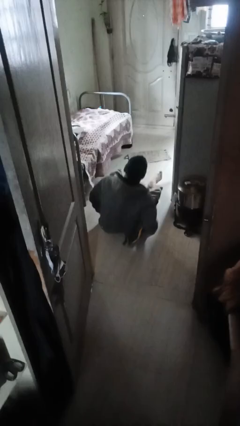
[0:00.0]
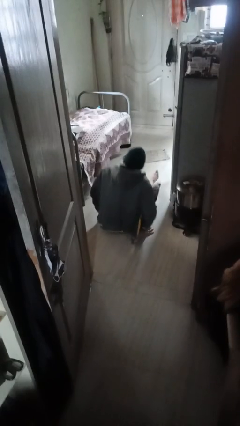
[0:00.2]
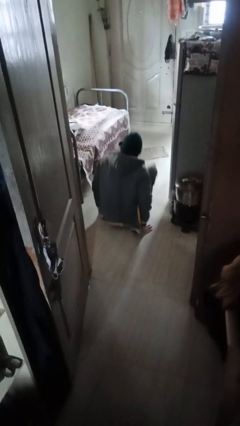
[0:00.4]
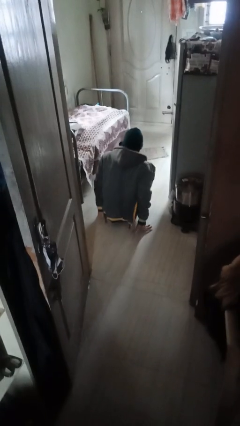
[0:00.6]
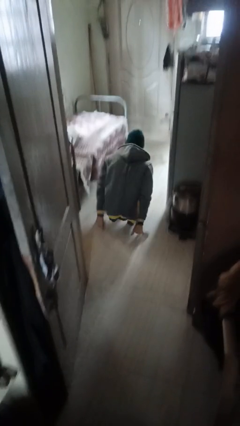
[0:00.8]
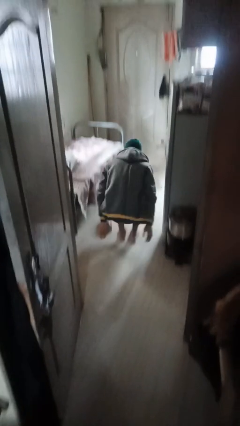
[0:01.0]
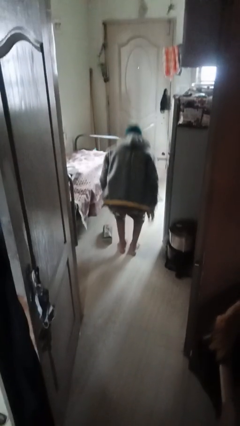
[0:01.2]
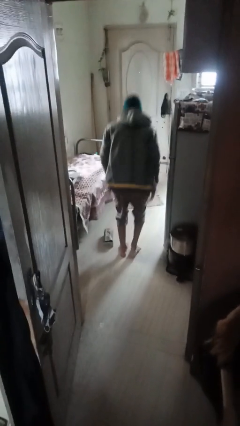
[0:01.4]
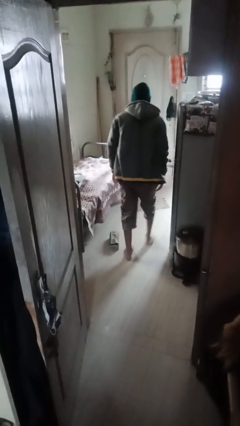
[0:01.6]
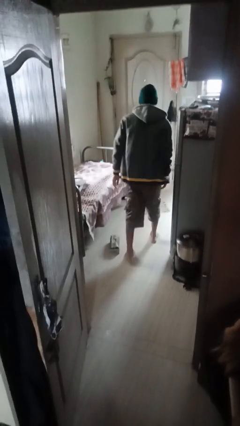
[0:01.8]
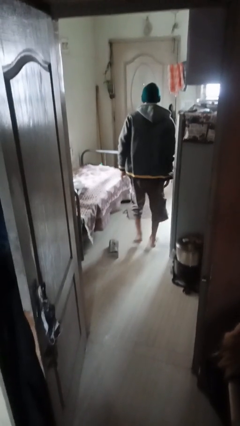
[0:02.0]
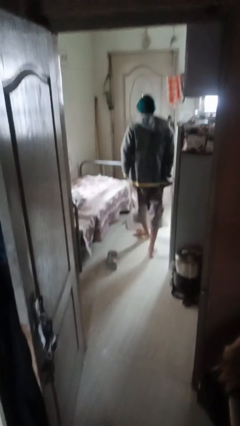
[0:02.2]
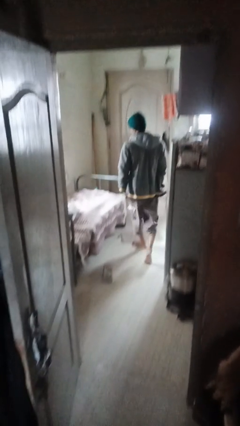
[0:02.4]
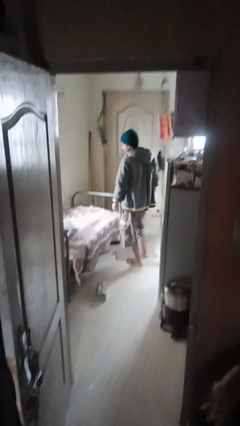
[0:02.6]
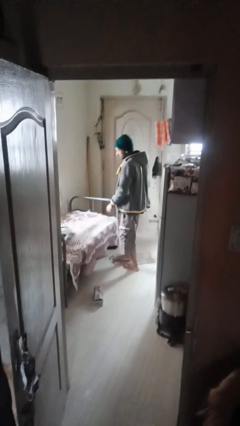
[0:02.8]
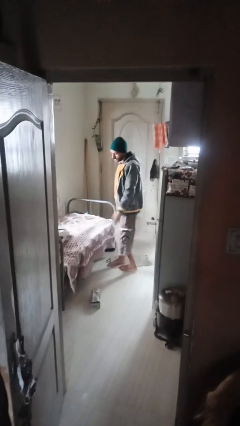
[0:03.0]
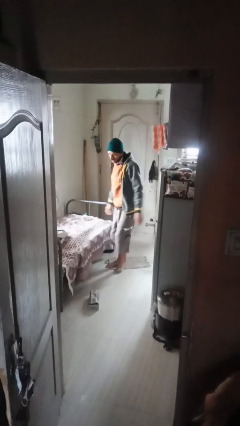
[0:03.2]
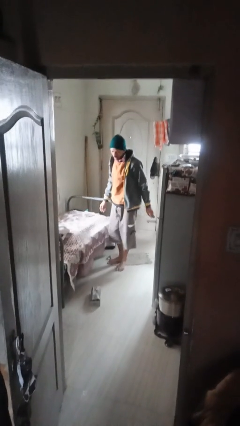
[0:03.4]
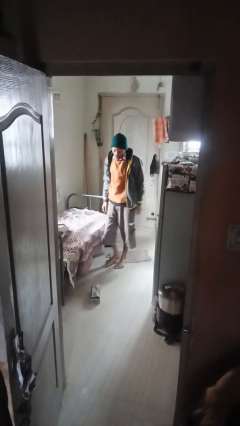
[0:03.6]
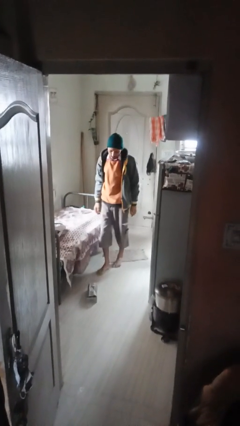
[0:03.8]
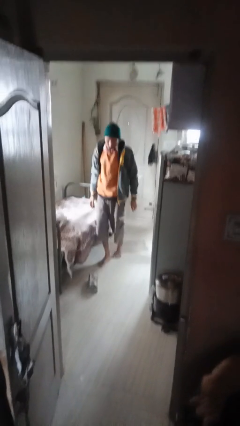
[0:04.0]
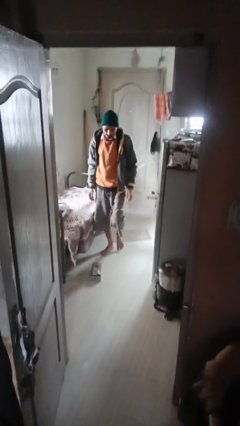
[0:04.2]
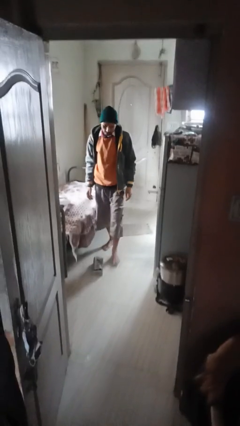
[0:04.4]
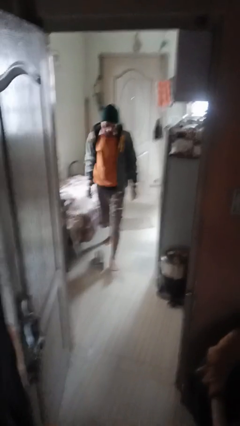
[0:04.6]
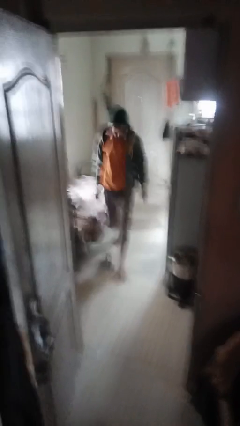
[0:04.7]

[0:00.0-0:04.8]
person stands up from floor

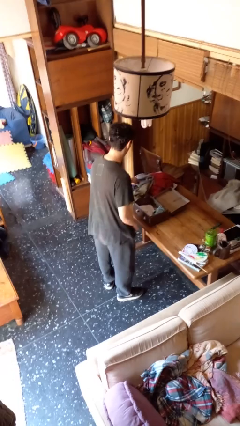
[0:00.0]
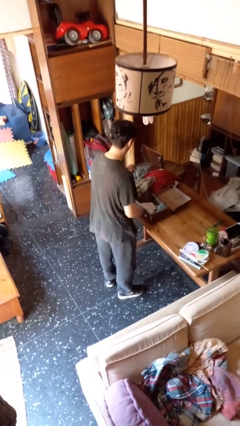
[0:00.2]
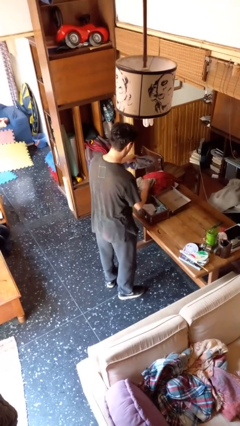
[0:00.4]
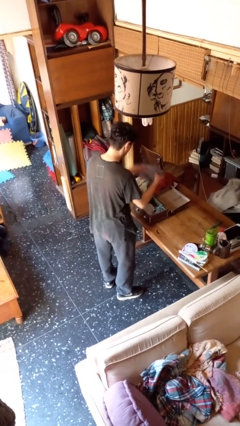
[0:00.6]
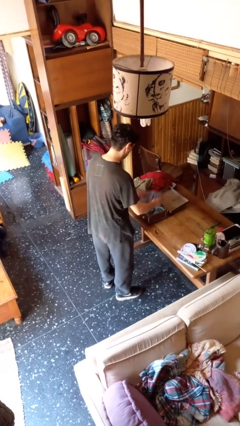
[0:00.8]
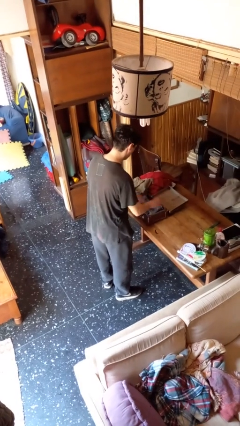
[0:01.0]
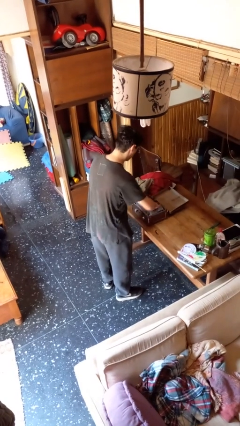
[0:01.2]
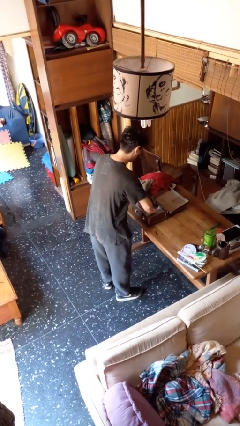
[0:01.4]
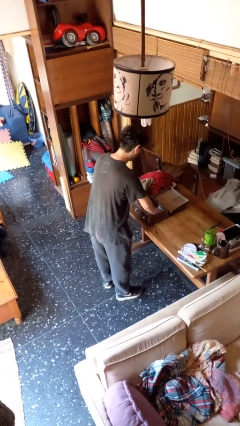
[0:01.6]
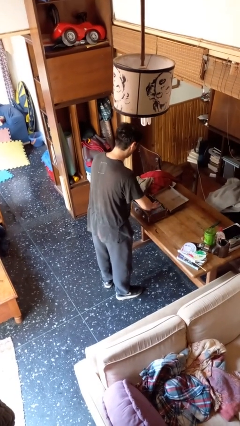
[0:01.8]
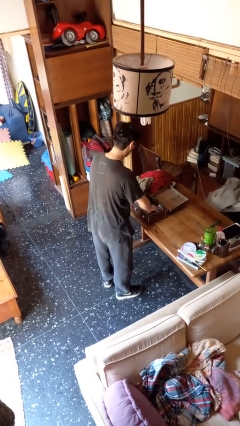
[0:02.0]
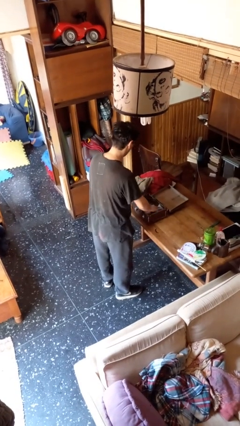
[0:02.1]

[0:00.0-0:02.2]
person loads clothes into suitcase

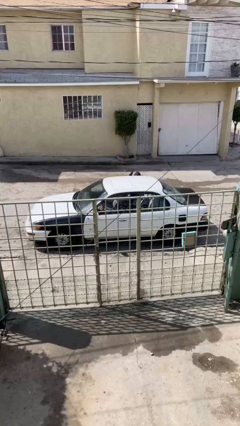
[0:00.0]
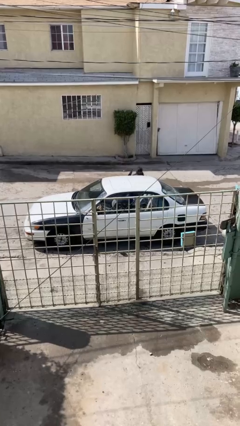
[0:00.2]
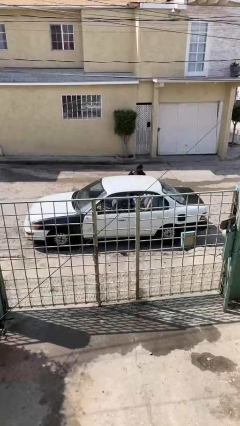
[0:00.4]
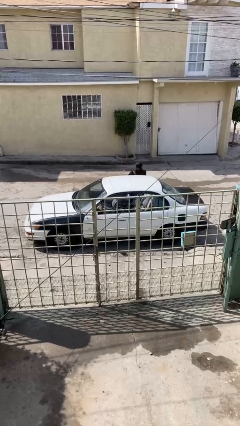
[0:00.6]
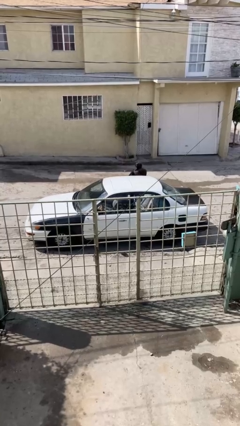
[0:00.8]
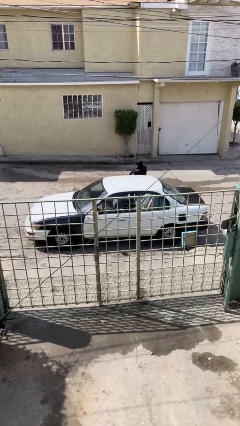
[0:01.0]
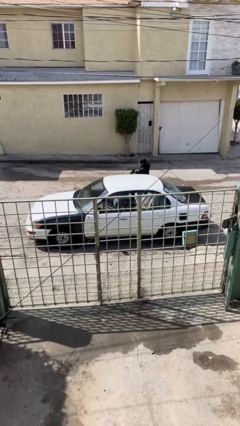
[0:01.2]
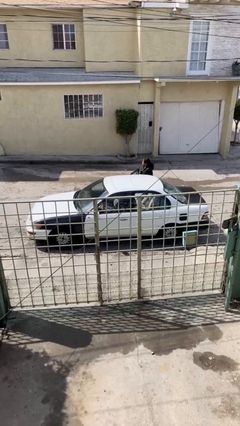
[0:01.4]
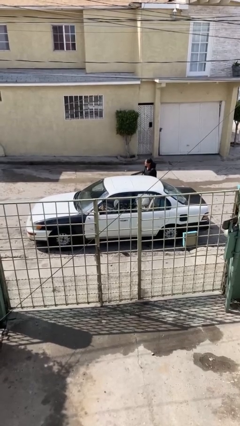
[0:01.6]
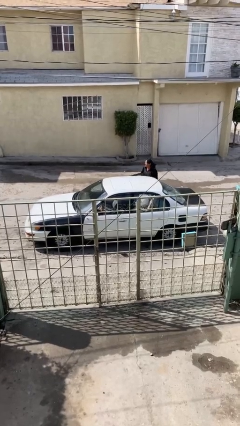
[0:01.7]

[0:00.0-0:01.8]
car drops off person

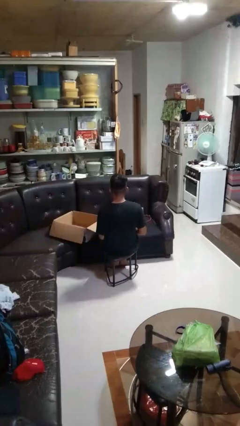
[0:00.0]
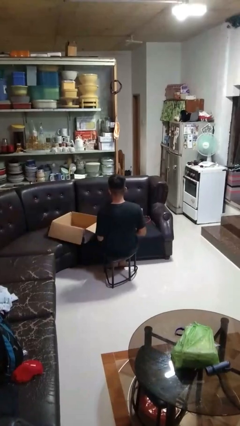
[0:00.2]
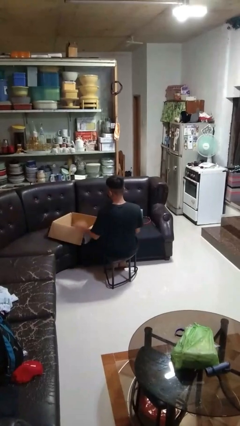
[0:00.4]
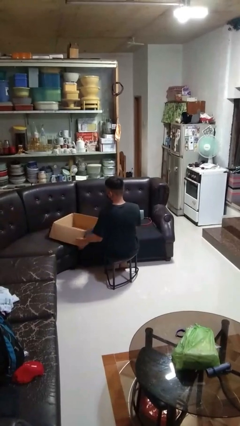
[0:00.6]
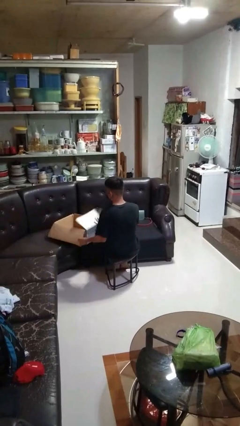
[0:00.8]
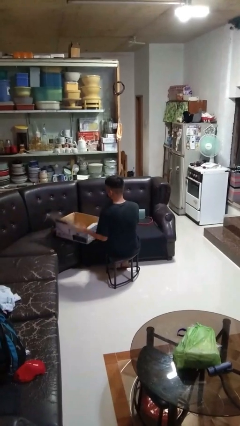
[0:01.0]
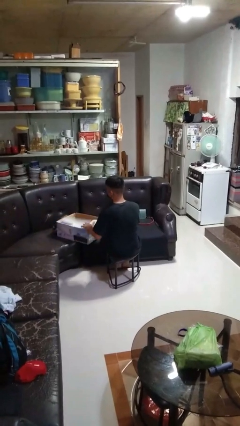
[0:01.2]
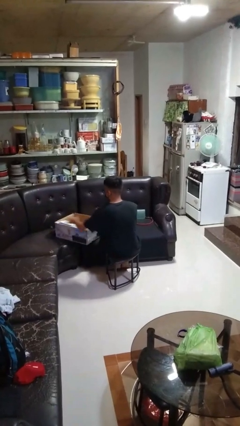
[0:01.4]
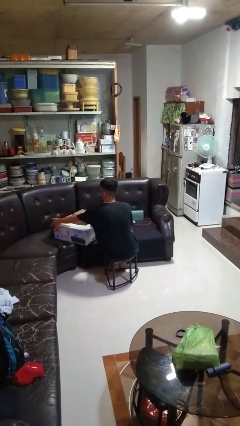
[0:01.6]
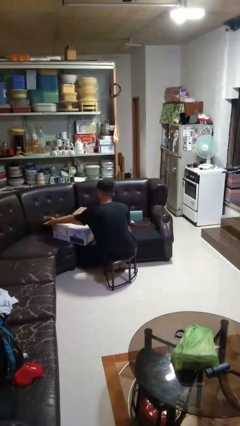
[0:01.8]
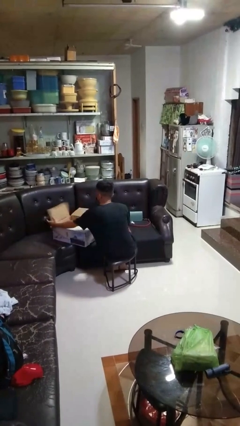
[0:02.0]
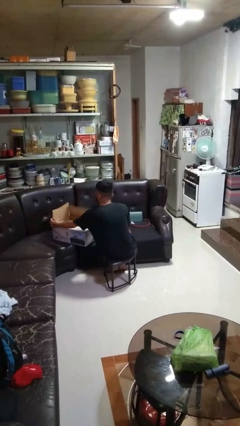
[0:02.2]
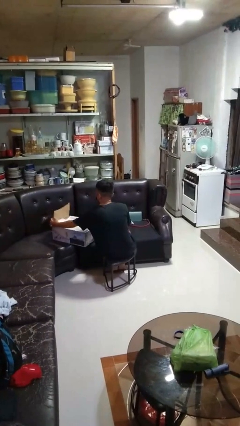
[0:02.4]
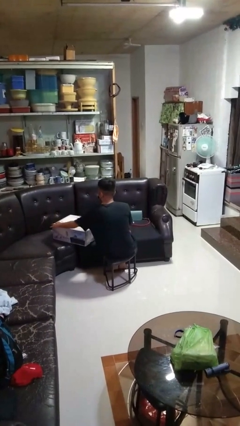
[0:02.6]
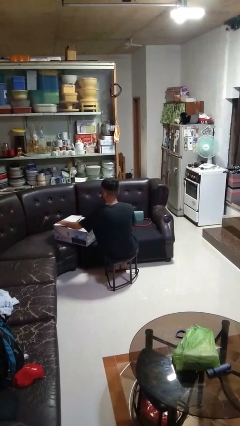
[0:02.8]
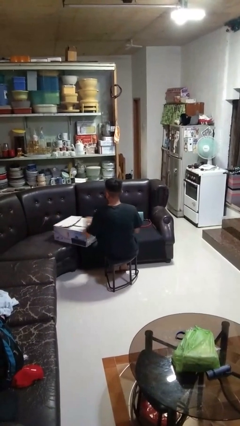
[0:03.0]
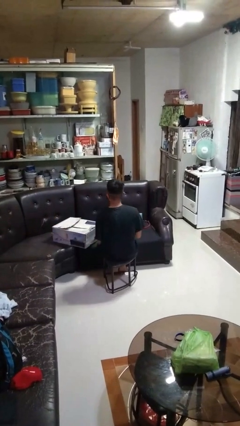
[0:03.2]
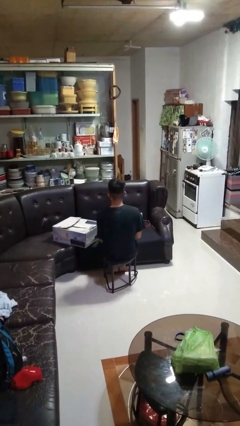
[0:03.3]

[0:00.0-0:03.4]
person closes box

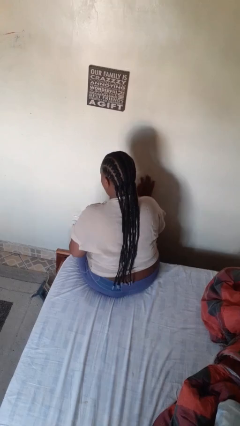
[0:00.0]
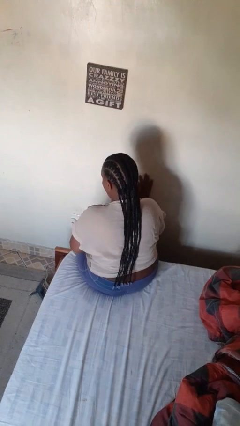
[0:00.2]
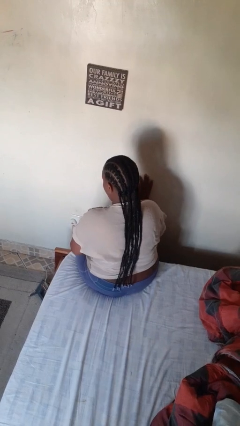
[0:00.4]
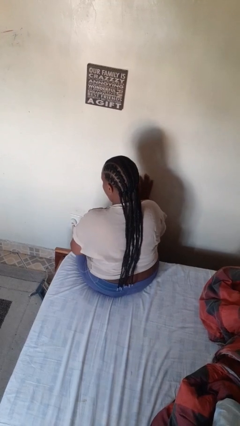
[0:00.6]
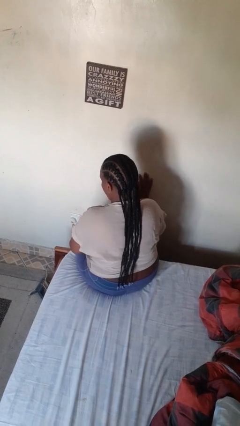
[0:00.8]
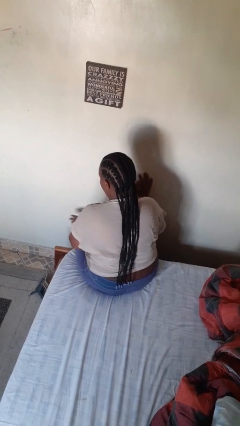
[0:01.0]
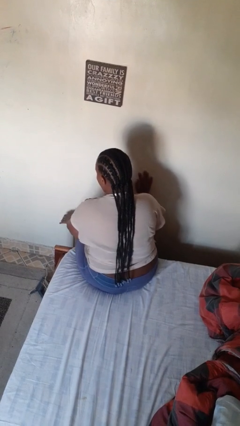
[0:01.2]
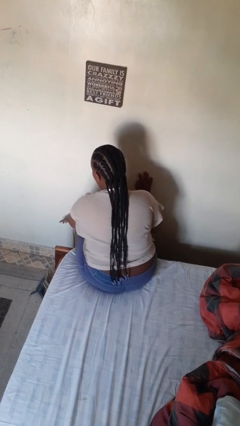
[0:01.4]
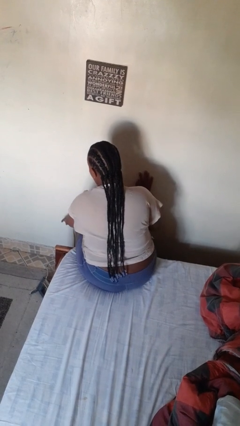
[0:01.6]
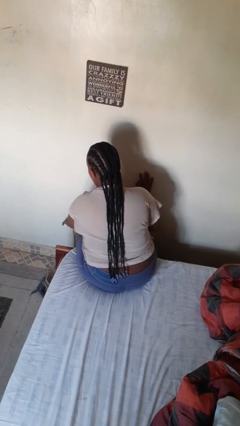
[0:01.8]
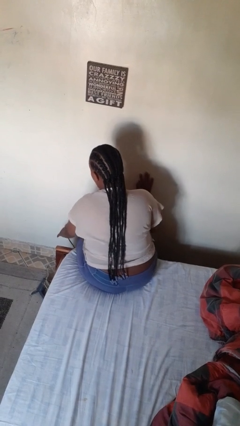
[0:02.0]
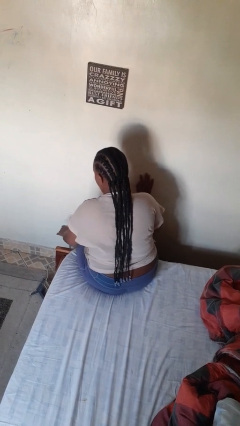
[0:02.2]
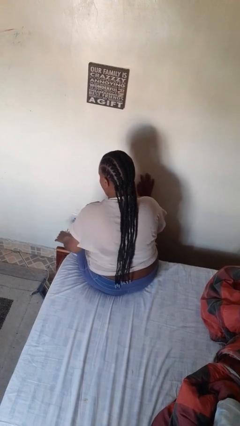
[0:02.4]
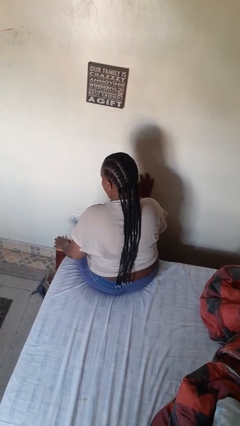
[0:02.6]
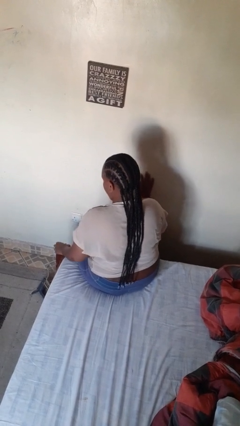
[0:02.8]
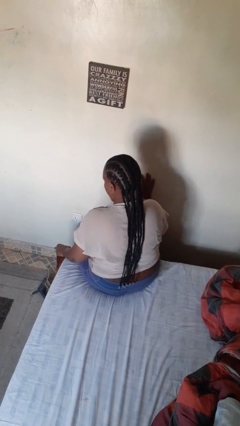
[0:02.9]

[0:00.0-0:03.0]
person unplugs from electrical socket

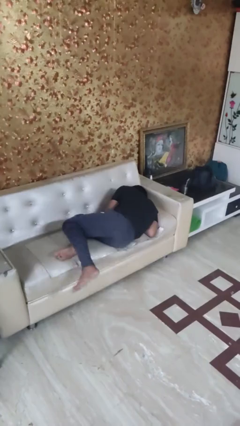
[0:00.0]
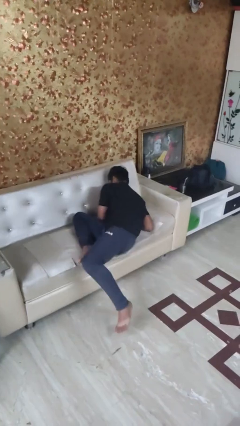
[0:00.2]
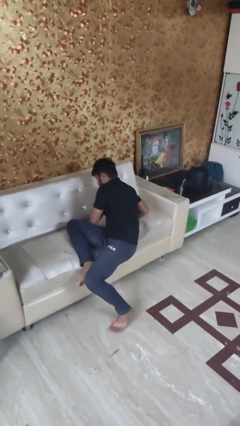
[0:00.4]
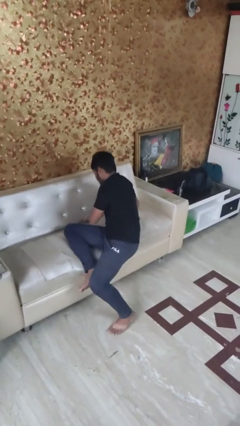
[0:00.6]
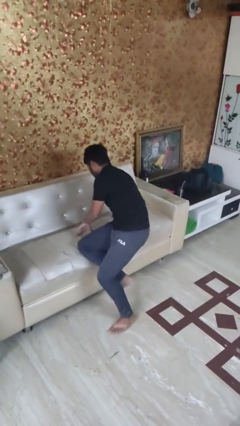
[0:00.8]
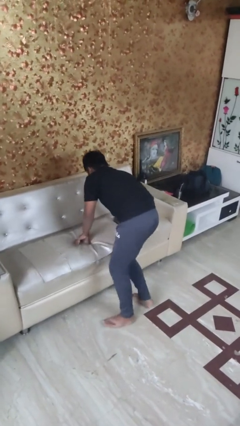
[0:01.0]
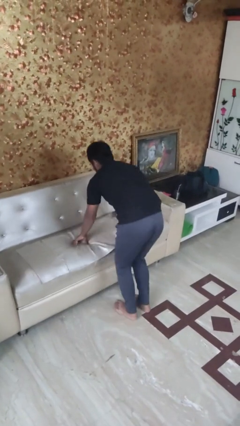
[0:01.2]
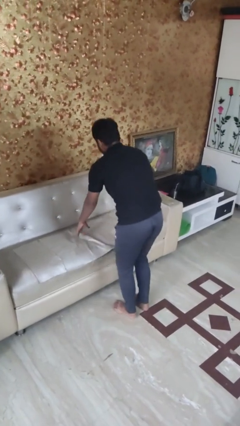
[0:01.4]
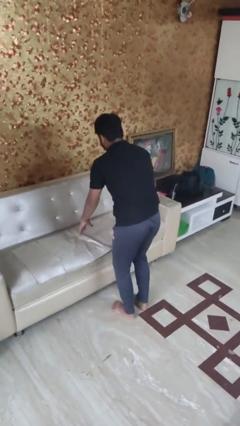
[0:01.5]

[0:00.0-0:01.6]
person stands up

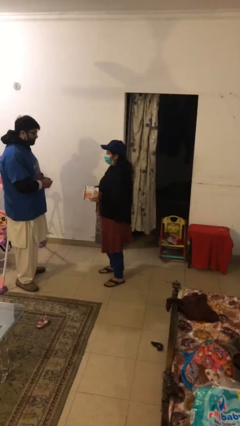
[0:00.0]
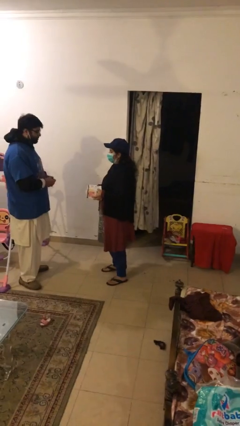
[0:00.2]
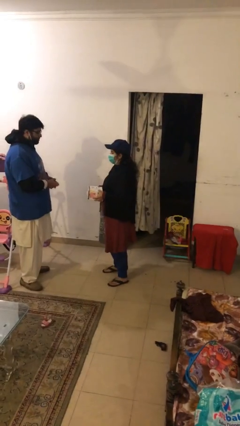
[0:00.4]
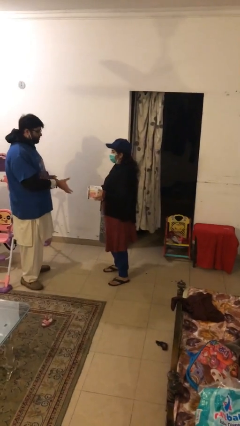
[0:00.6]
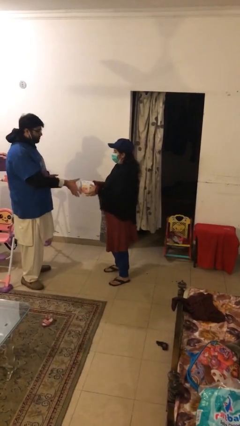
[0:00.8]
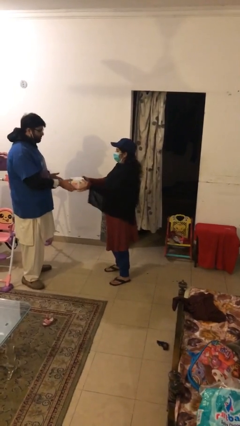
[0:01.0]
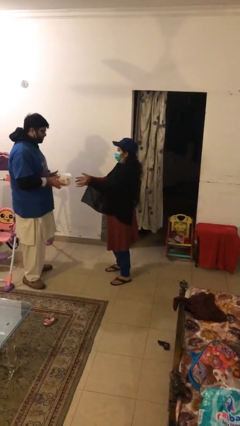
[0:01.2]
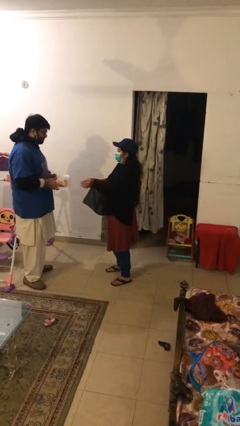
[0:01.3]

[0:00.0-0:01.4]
person transfers object to person
